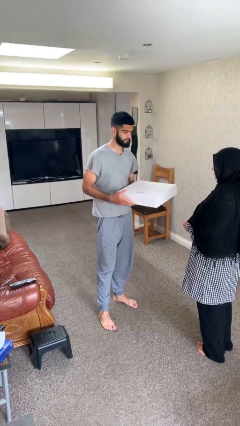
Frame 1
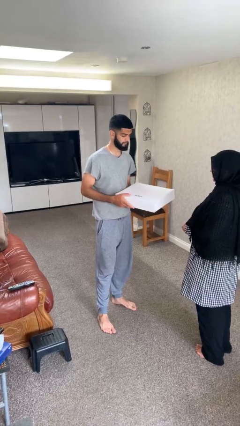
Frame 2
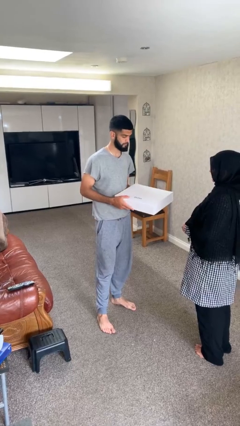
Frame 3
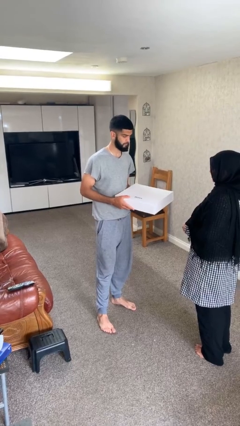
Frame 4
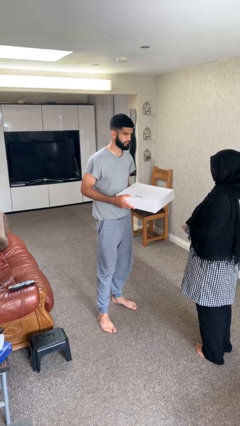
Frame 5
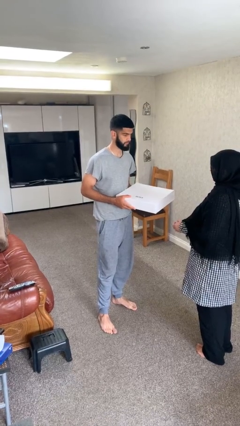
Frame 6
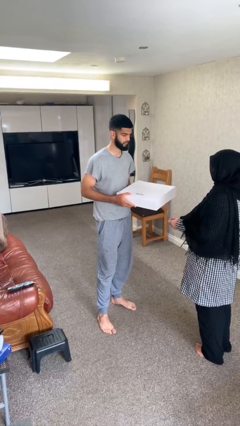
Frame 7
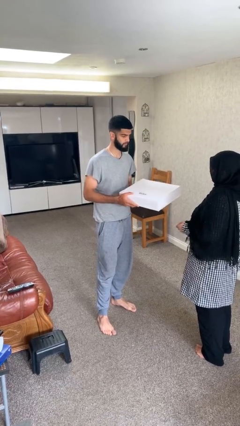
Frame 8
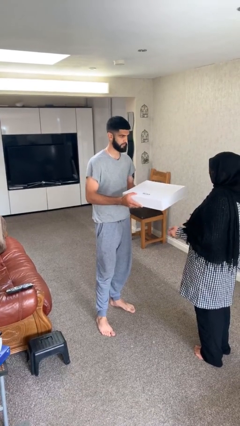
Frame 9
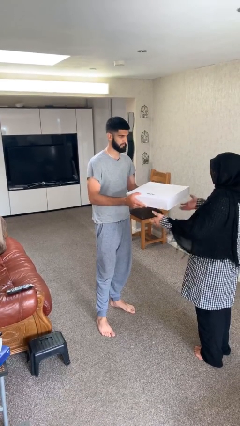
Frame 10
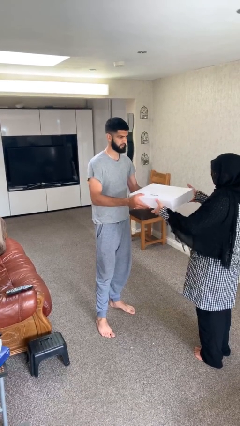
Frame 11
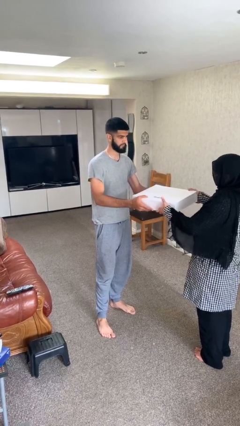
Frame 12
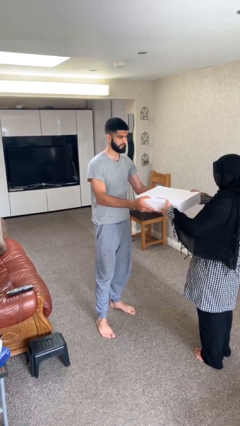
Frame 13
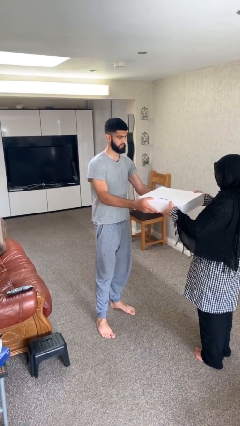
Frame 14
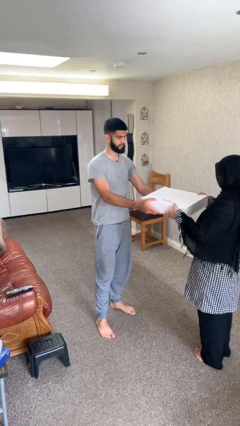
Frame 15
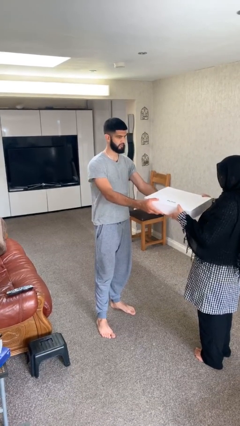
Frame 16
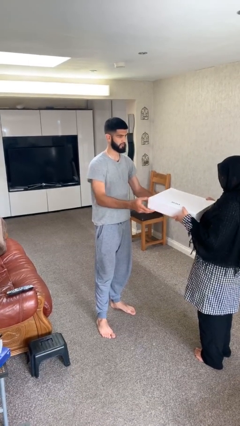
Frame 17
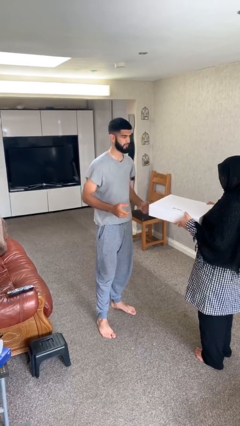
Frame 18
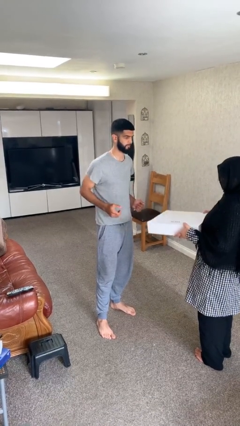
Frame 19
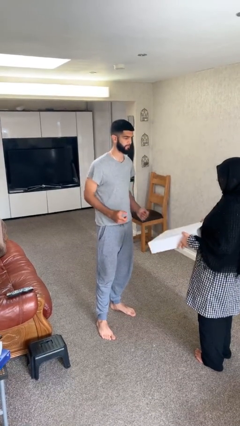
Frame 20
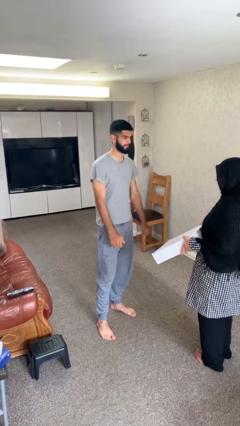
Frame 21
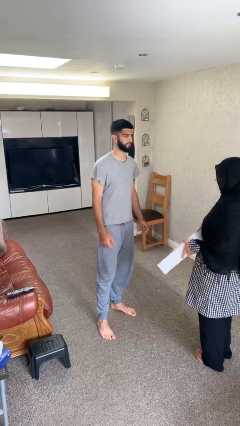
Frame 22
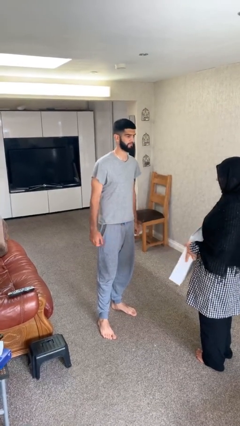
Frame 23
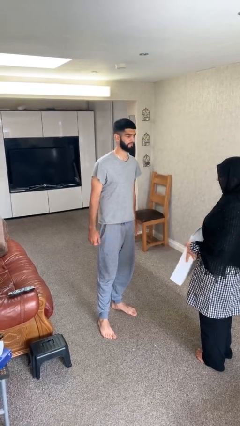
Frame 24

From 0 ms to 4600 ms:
person transfers object to person

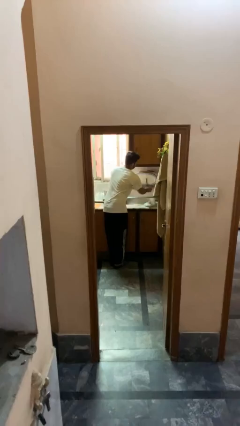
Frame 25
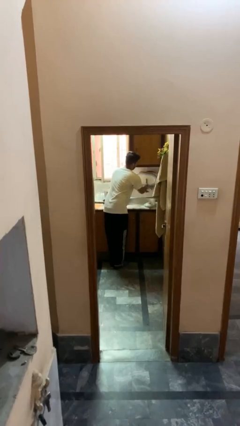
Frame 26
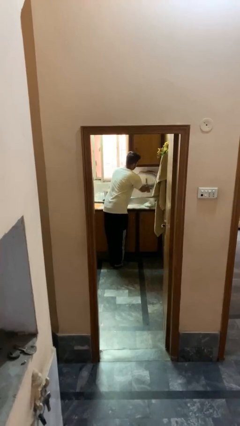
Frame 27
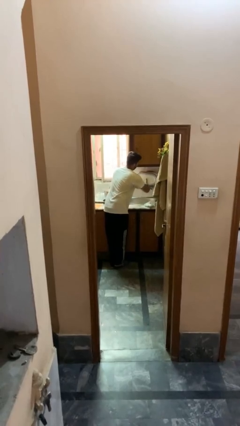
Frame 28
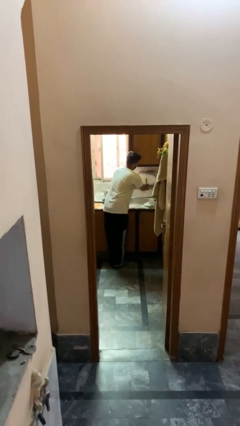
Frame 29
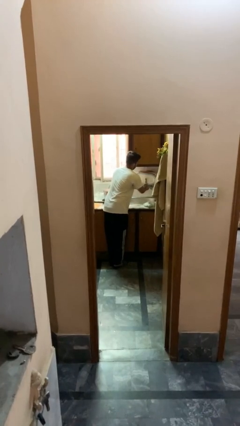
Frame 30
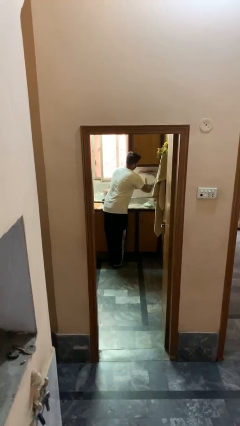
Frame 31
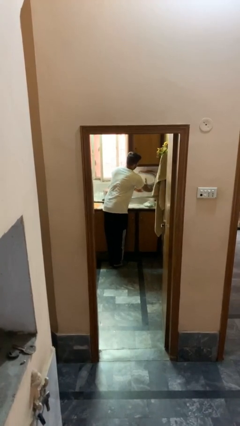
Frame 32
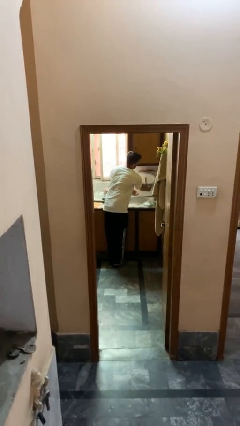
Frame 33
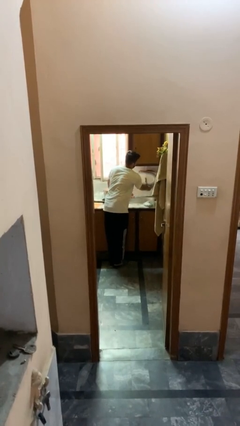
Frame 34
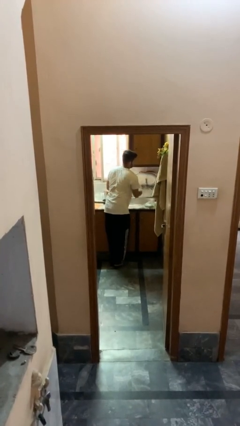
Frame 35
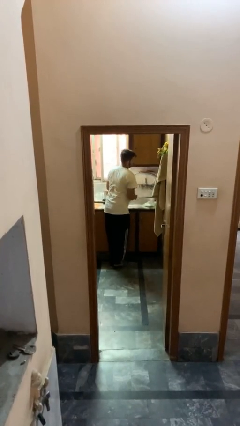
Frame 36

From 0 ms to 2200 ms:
person washes hands

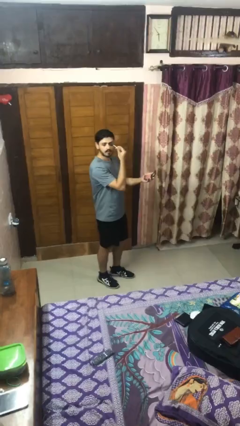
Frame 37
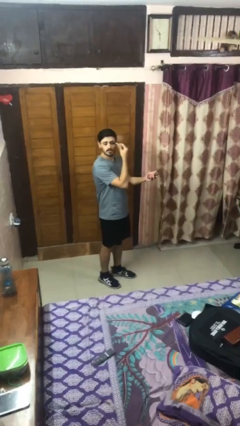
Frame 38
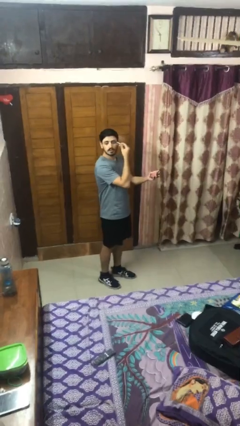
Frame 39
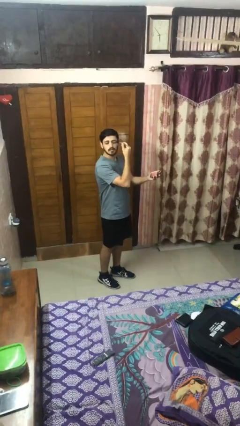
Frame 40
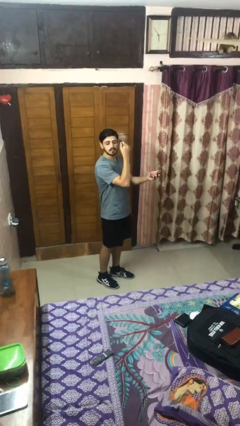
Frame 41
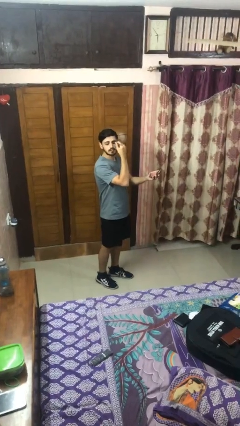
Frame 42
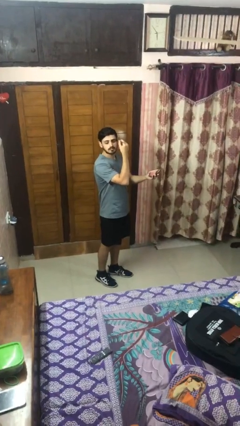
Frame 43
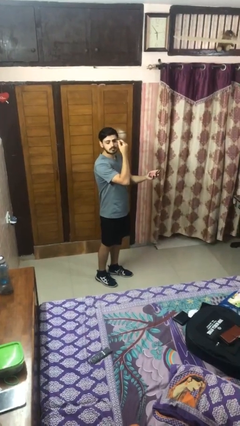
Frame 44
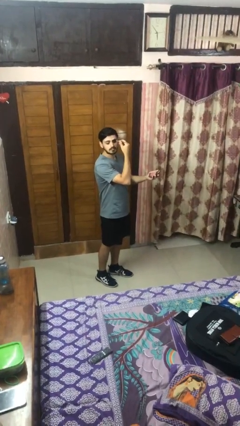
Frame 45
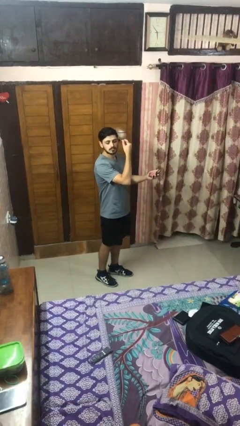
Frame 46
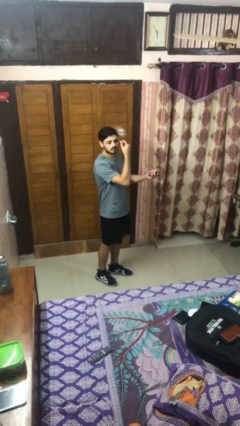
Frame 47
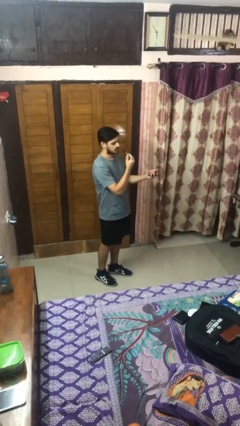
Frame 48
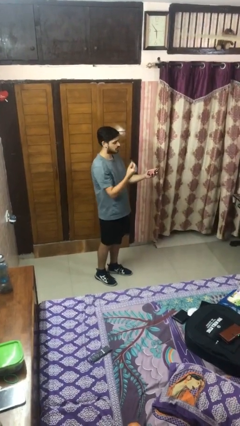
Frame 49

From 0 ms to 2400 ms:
person applies eye makeup

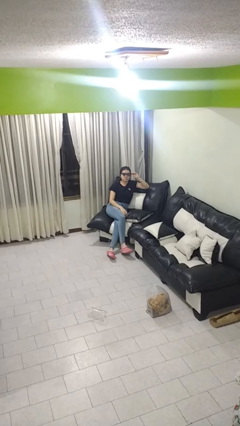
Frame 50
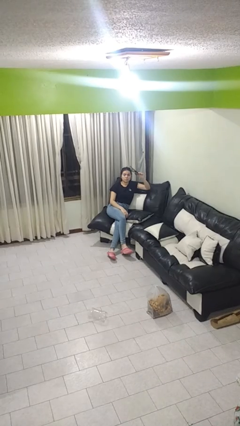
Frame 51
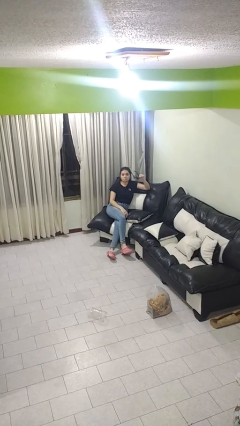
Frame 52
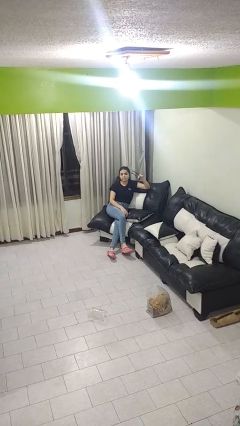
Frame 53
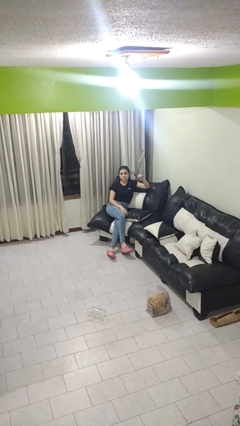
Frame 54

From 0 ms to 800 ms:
person takes off sunglasses

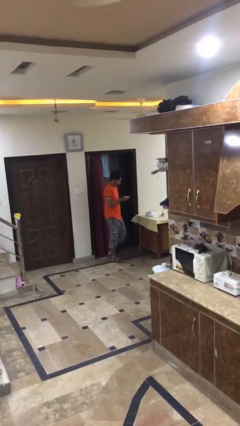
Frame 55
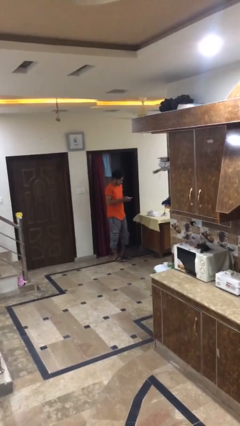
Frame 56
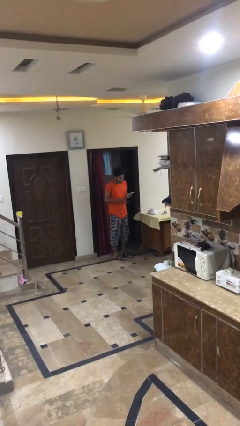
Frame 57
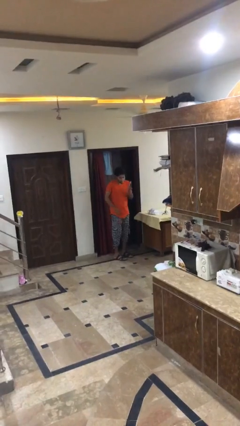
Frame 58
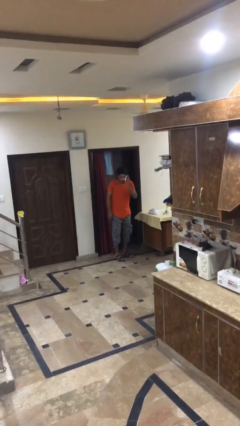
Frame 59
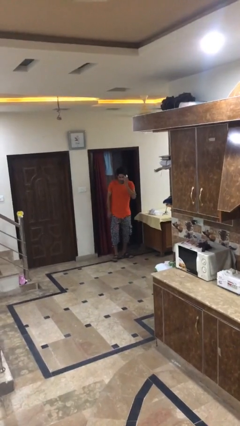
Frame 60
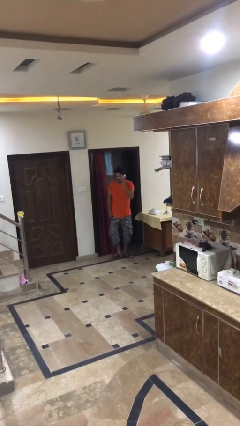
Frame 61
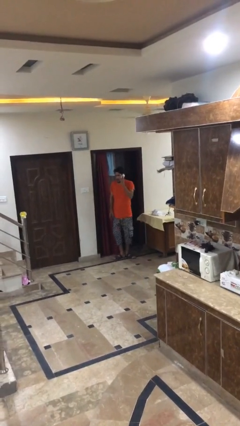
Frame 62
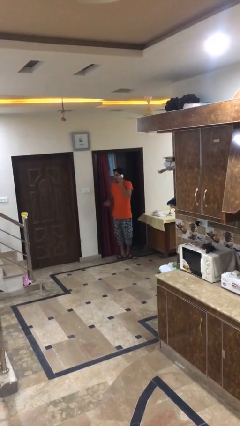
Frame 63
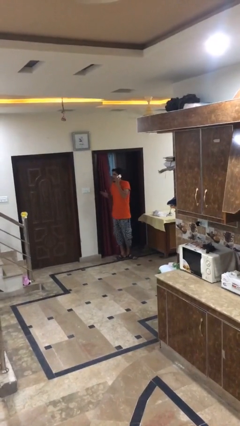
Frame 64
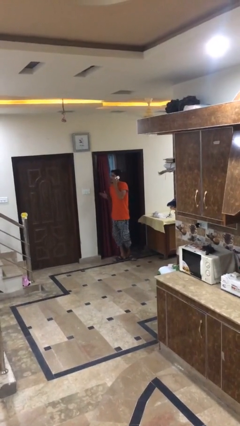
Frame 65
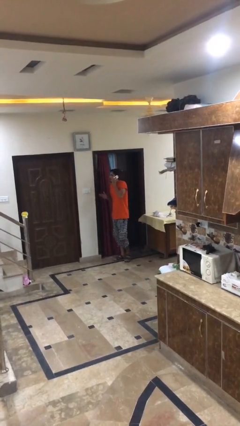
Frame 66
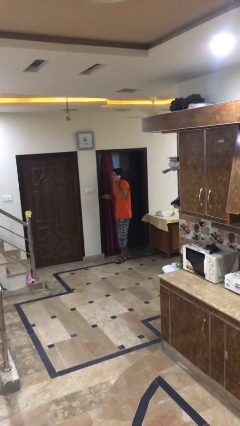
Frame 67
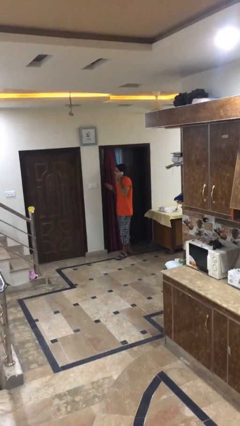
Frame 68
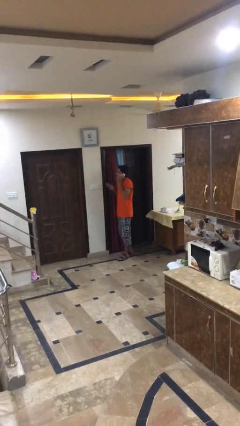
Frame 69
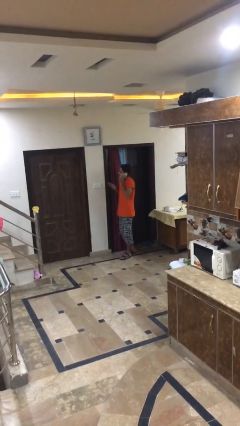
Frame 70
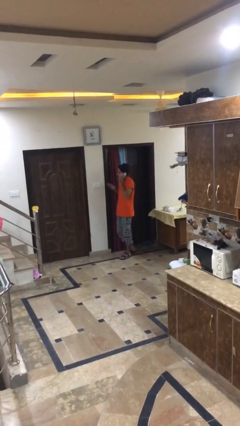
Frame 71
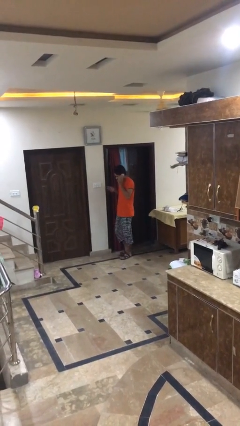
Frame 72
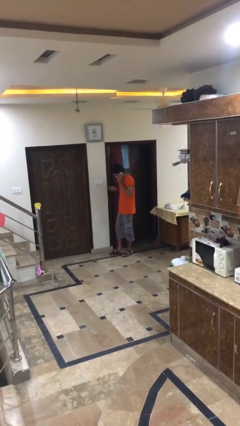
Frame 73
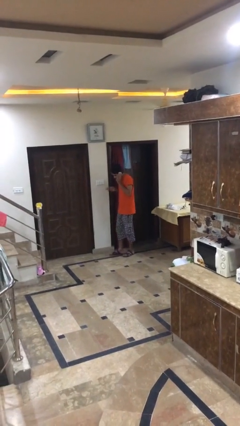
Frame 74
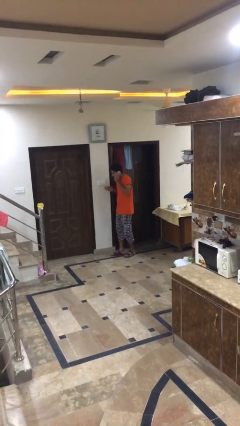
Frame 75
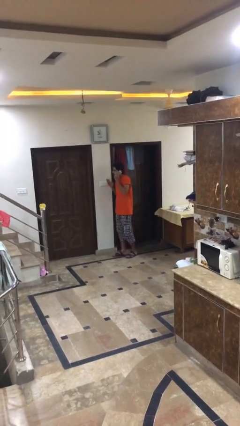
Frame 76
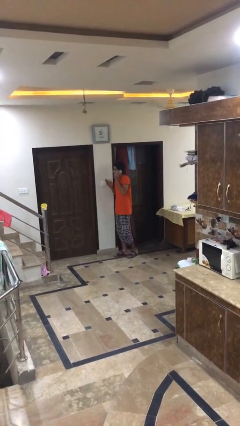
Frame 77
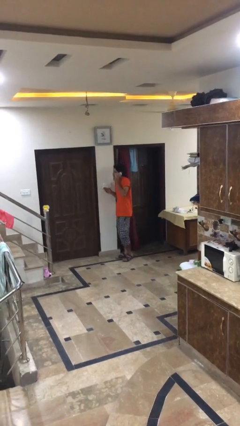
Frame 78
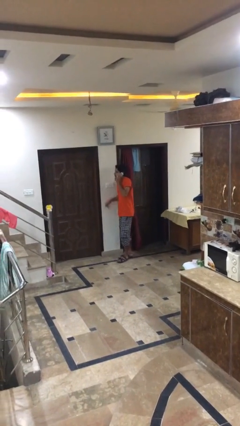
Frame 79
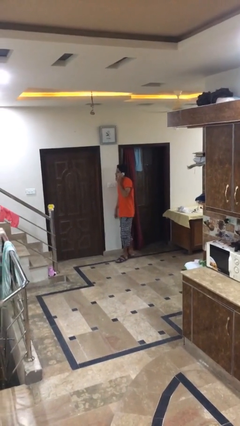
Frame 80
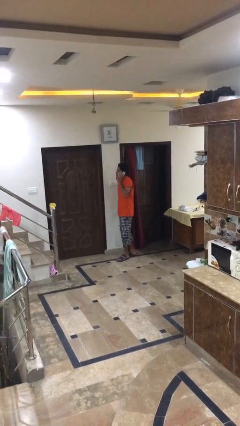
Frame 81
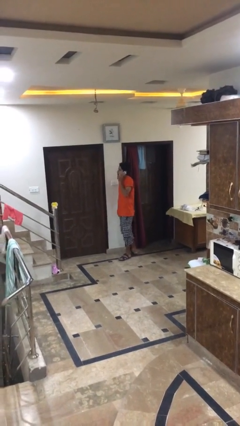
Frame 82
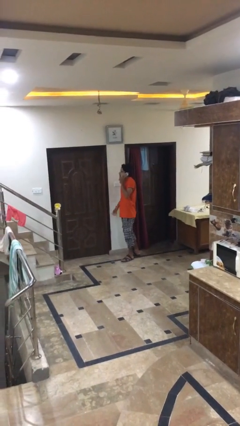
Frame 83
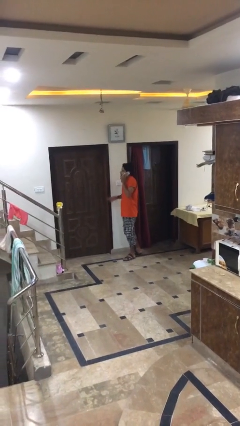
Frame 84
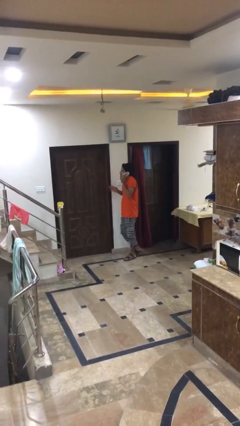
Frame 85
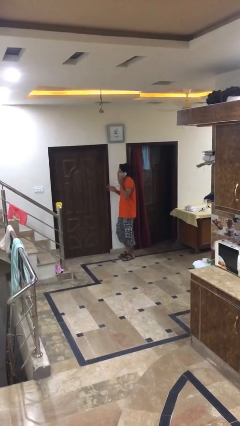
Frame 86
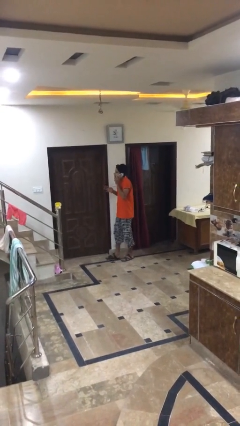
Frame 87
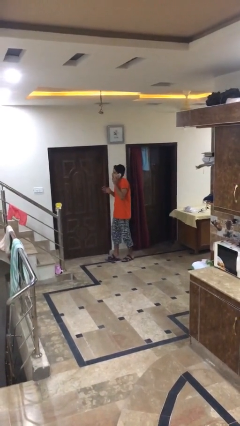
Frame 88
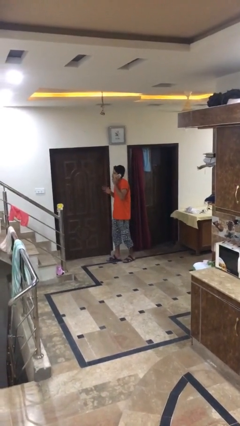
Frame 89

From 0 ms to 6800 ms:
person talks on phone

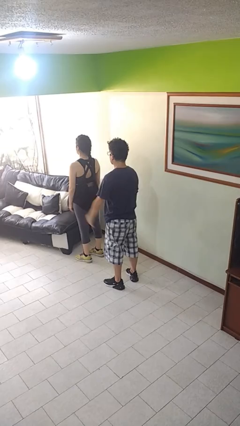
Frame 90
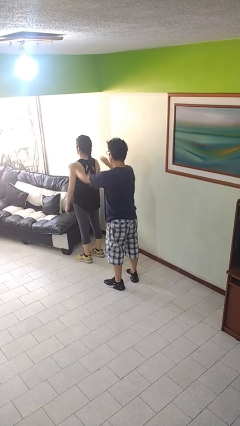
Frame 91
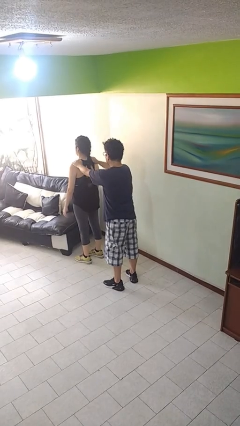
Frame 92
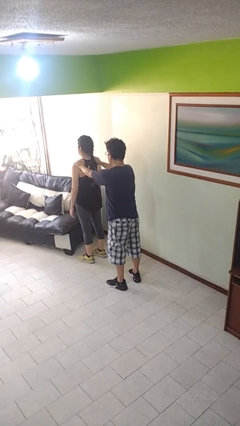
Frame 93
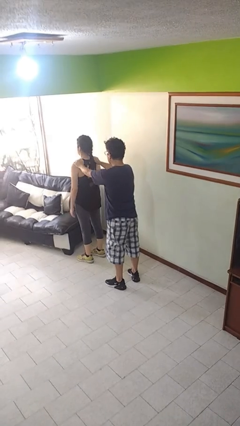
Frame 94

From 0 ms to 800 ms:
person grabs person by shoulder
